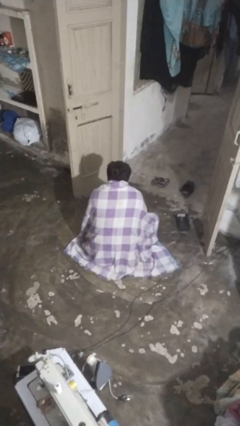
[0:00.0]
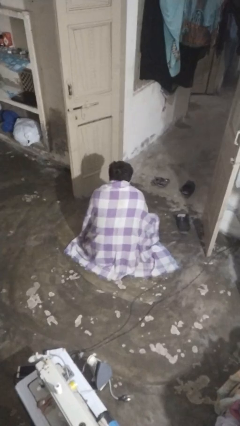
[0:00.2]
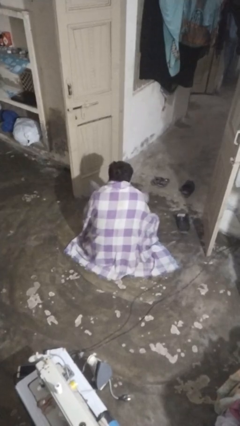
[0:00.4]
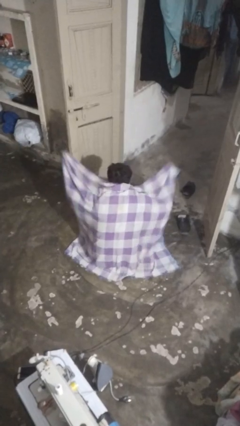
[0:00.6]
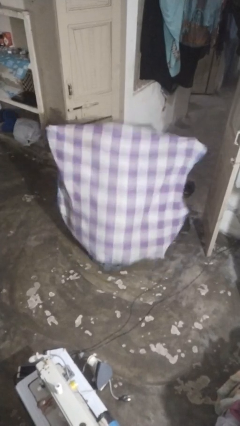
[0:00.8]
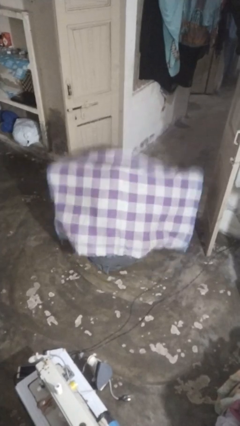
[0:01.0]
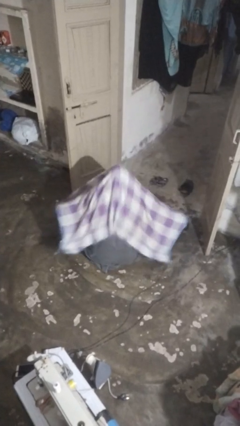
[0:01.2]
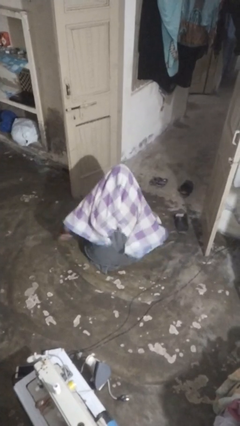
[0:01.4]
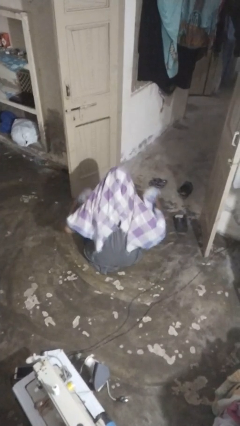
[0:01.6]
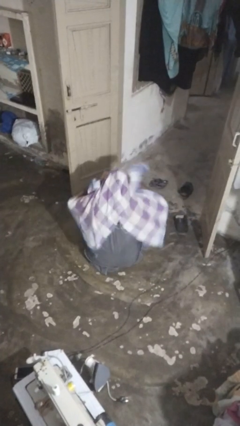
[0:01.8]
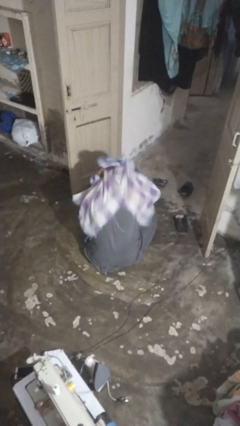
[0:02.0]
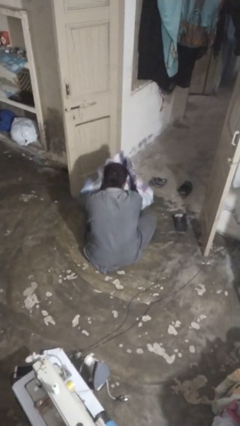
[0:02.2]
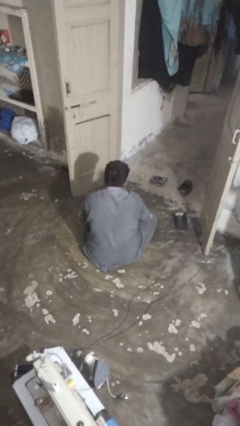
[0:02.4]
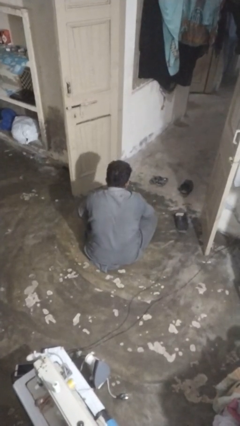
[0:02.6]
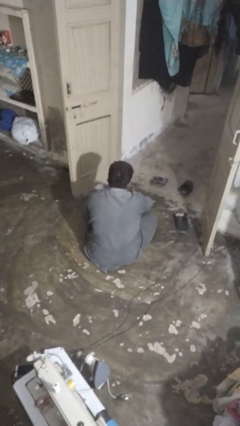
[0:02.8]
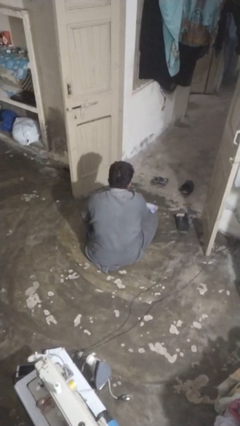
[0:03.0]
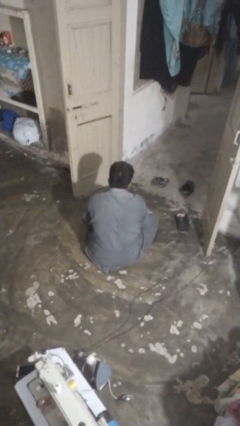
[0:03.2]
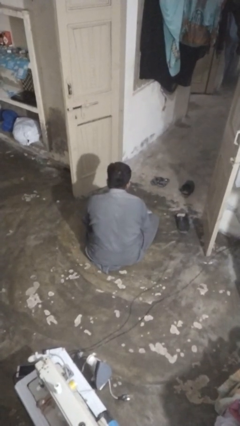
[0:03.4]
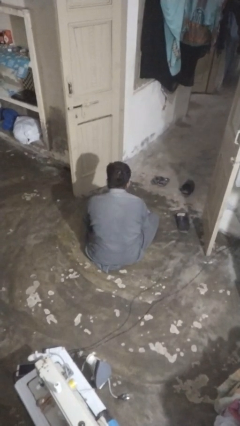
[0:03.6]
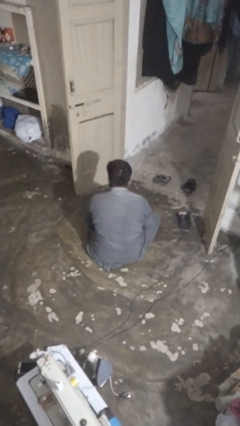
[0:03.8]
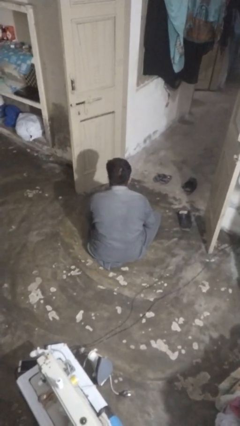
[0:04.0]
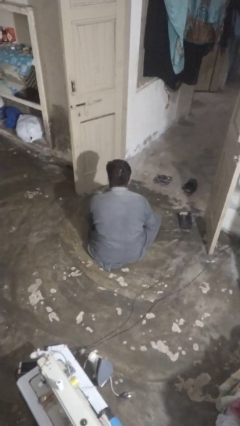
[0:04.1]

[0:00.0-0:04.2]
person uncovers with blanket

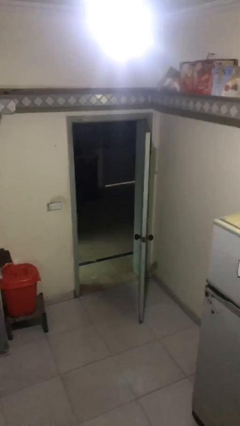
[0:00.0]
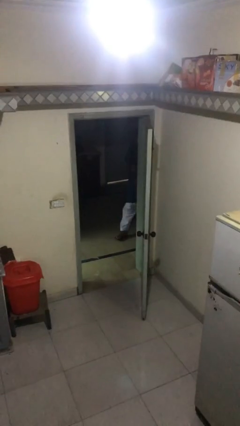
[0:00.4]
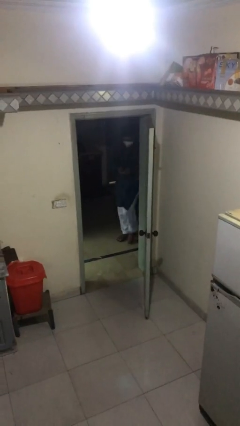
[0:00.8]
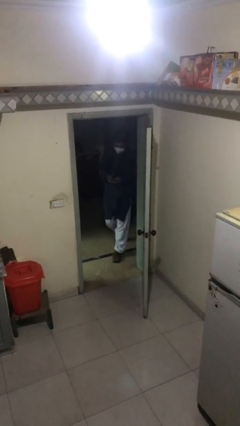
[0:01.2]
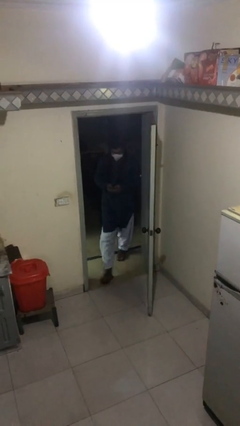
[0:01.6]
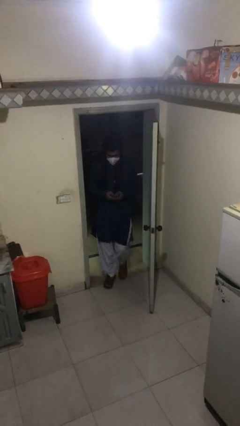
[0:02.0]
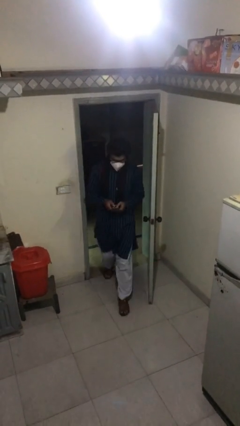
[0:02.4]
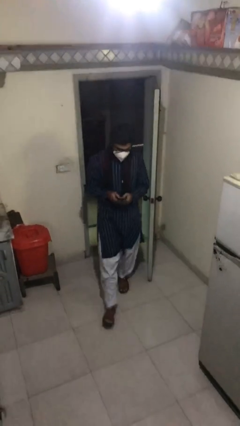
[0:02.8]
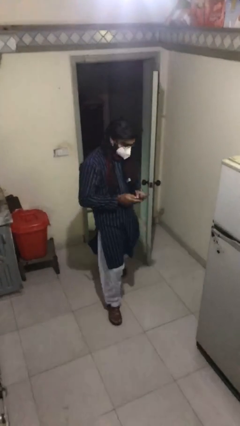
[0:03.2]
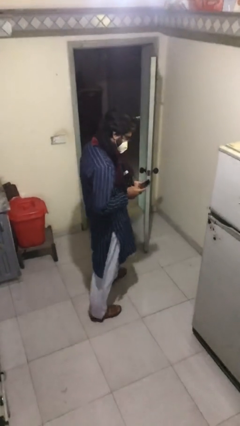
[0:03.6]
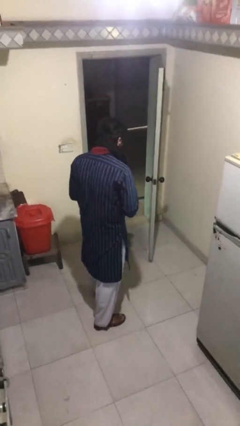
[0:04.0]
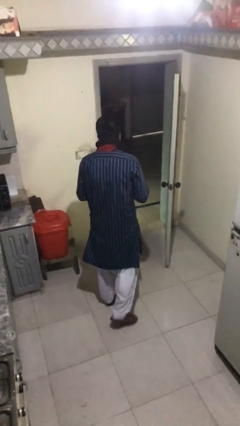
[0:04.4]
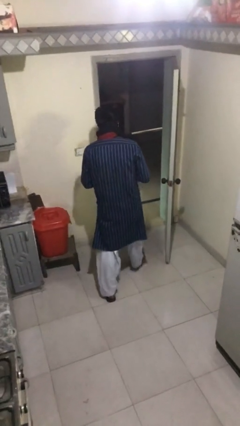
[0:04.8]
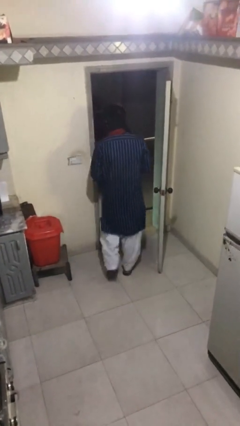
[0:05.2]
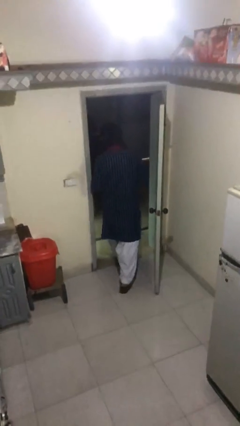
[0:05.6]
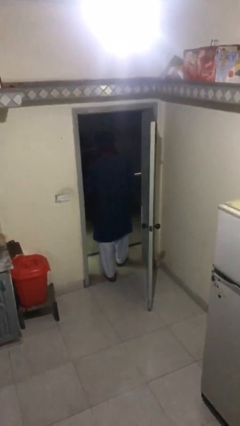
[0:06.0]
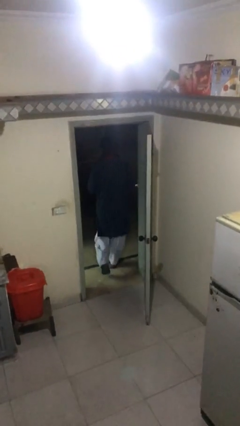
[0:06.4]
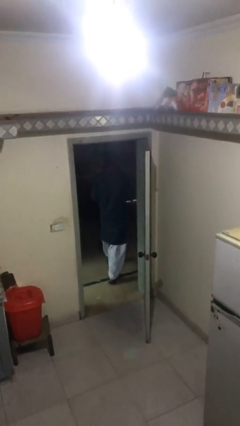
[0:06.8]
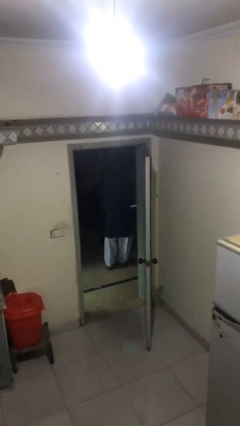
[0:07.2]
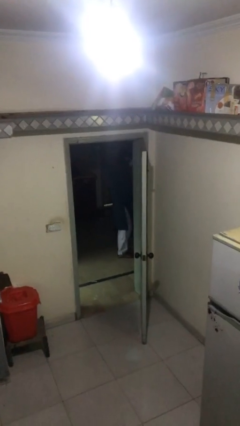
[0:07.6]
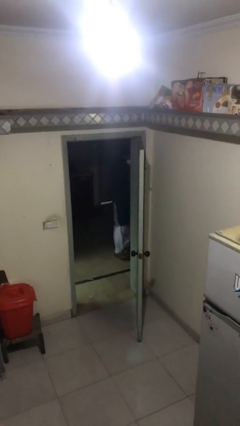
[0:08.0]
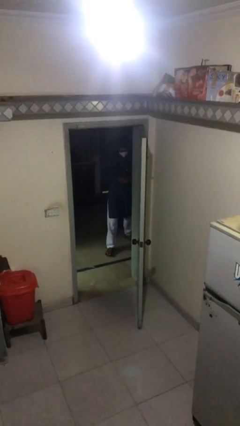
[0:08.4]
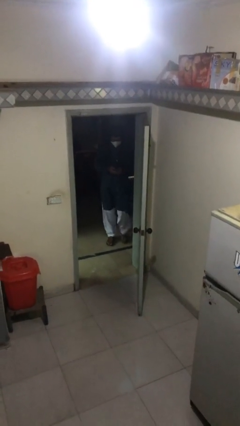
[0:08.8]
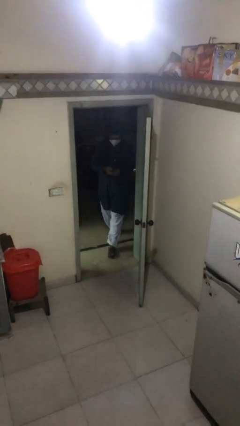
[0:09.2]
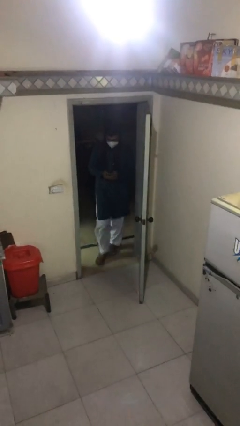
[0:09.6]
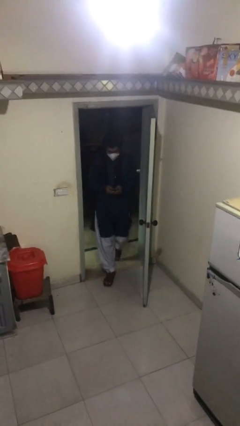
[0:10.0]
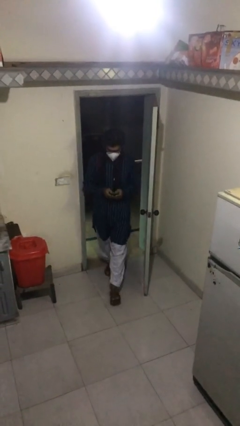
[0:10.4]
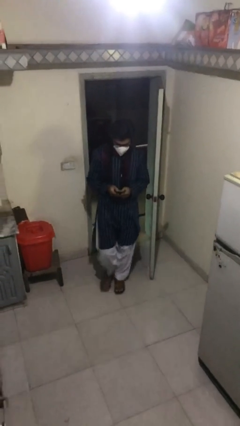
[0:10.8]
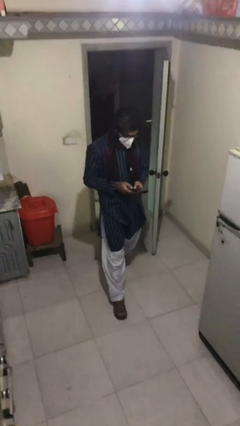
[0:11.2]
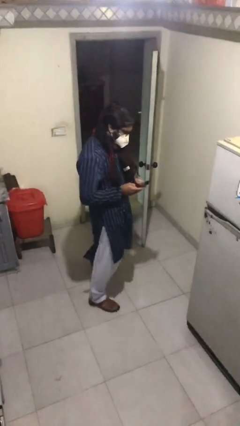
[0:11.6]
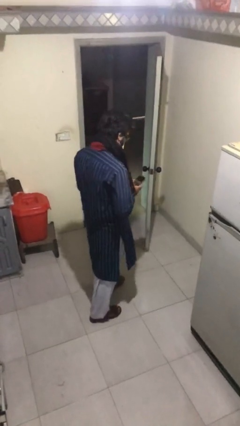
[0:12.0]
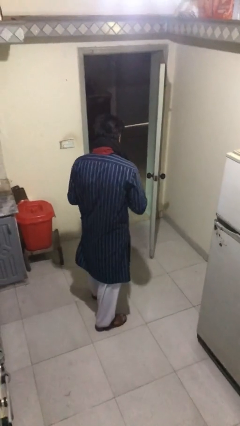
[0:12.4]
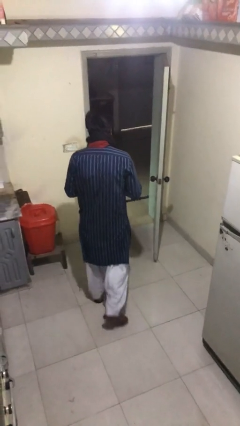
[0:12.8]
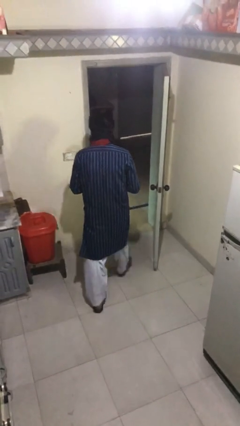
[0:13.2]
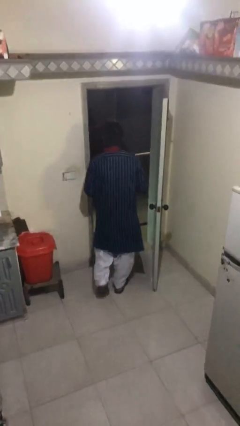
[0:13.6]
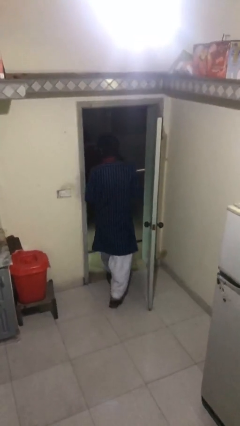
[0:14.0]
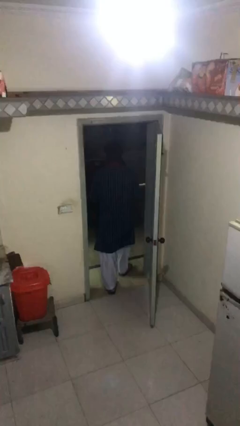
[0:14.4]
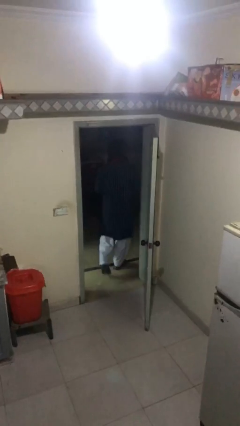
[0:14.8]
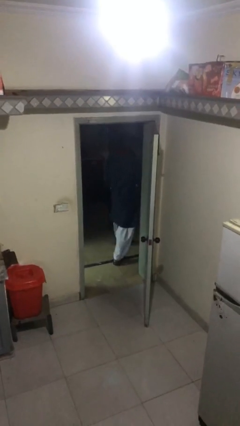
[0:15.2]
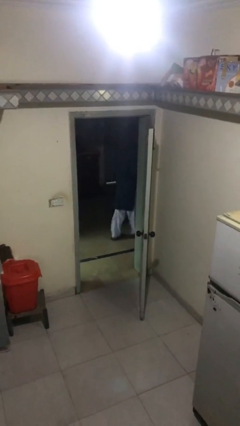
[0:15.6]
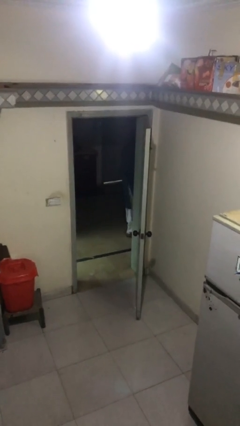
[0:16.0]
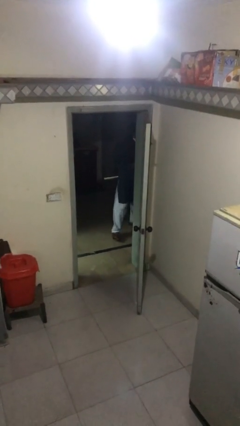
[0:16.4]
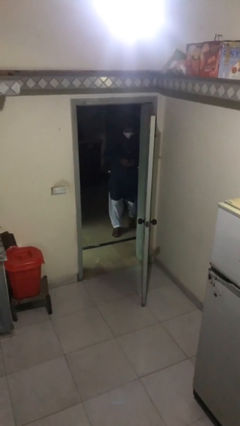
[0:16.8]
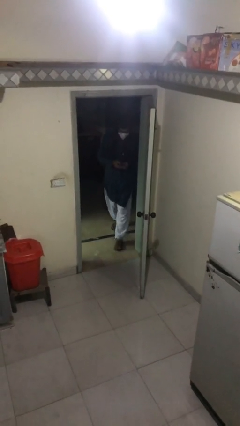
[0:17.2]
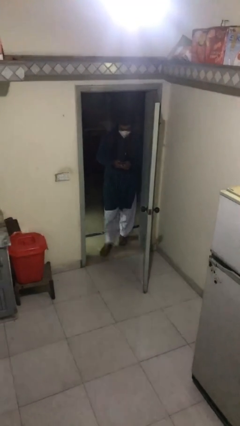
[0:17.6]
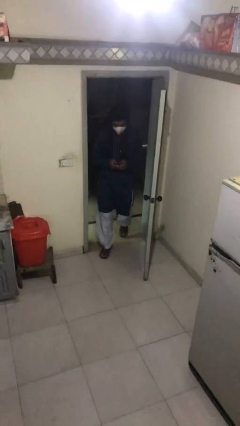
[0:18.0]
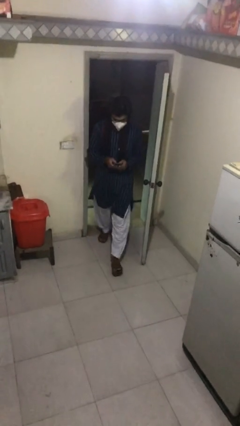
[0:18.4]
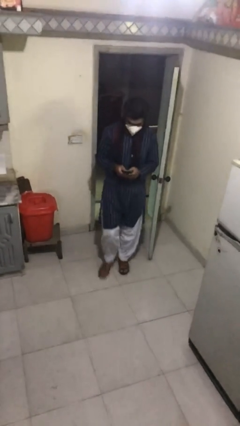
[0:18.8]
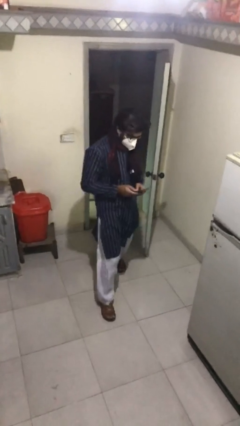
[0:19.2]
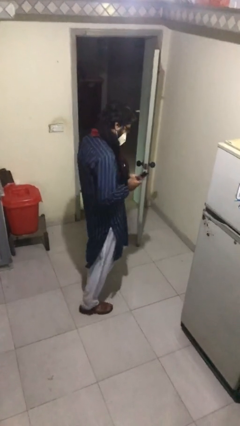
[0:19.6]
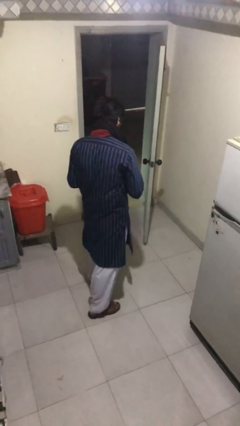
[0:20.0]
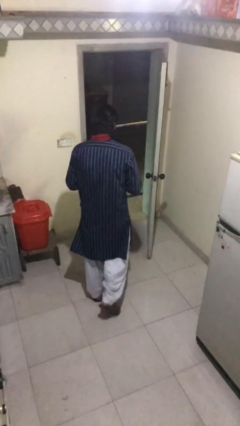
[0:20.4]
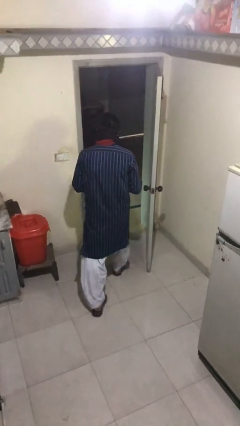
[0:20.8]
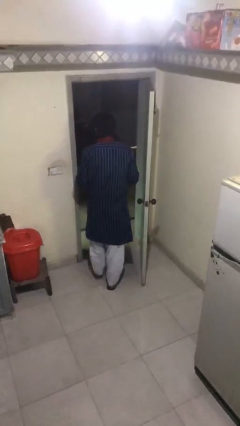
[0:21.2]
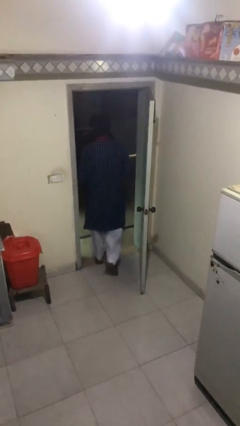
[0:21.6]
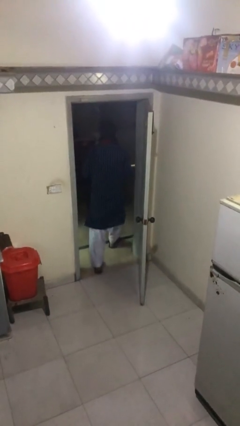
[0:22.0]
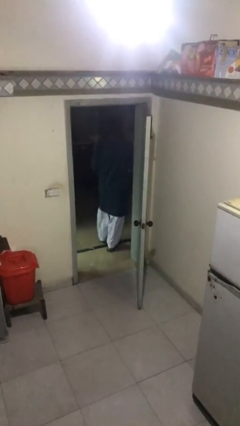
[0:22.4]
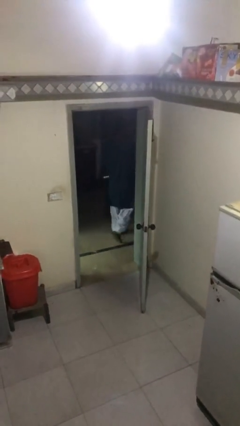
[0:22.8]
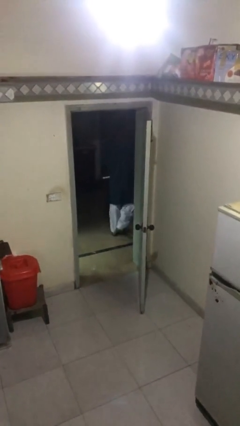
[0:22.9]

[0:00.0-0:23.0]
person texts on phone

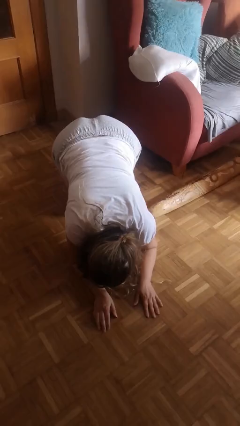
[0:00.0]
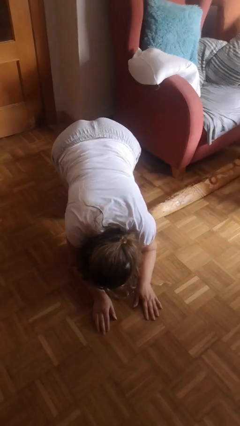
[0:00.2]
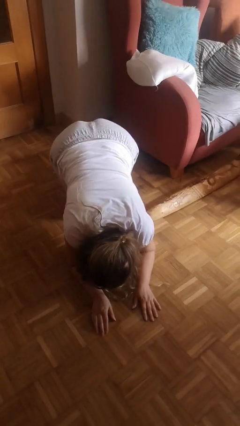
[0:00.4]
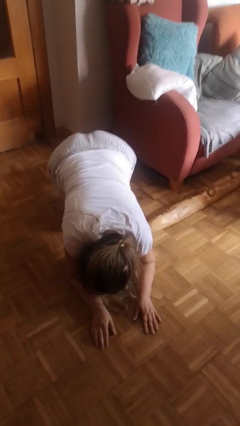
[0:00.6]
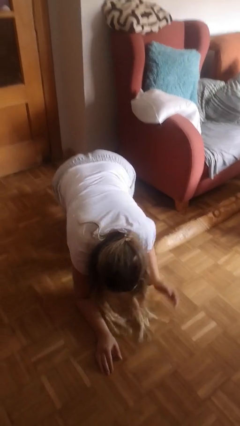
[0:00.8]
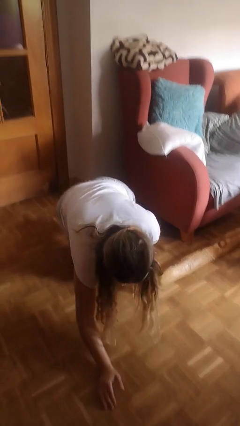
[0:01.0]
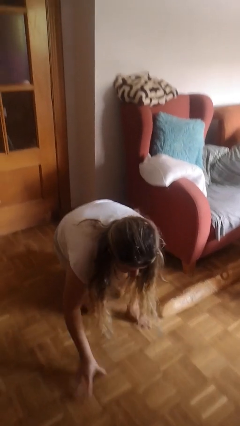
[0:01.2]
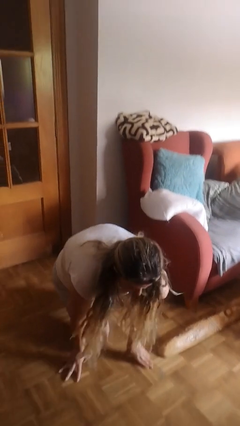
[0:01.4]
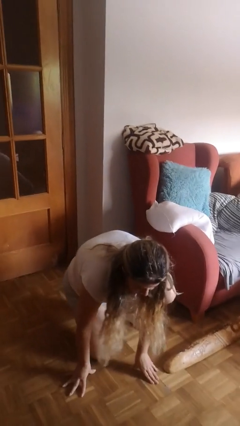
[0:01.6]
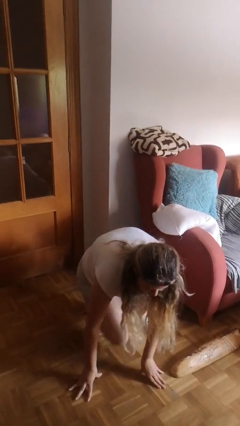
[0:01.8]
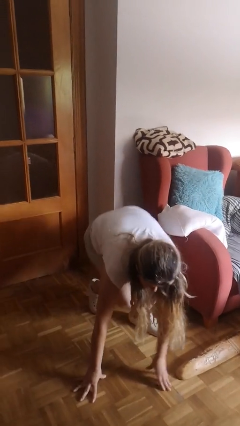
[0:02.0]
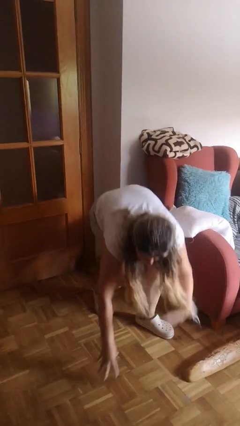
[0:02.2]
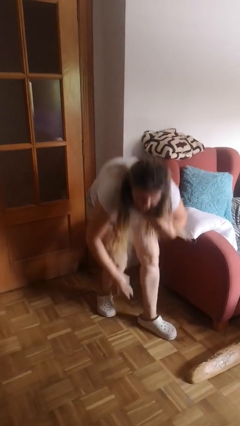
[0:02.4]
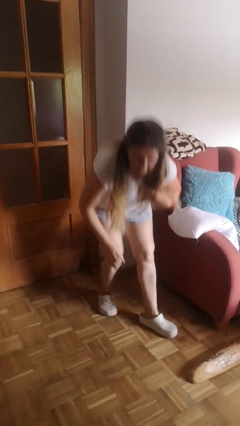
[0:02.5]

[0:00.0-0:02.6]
person stands up from floor
